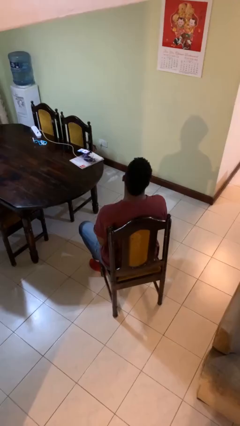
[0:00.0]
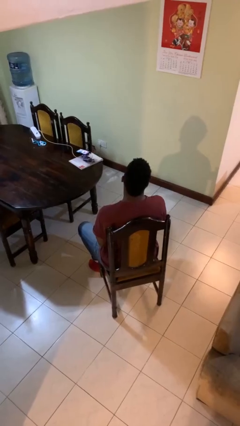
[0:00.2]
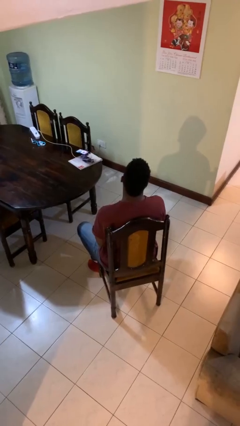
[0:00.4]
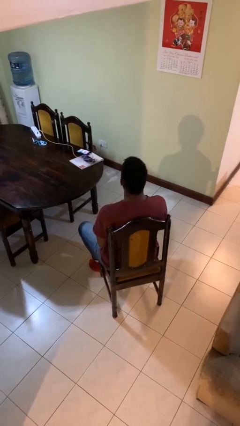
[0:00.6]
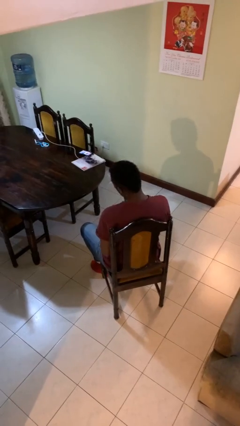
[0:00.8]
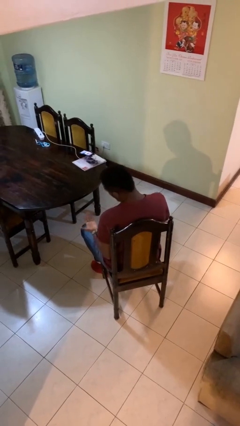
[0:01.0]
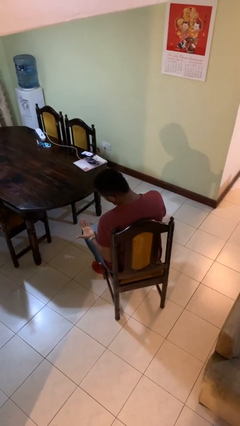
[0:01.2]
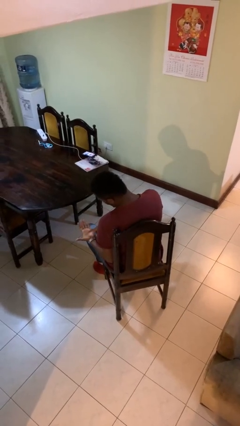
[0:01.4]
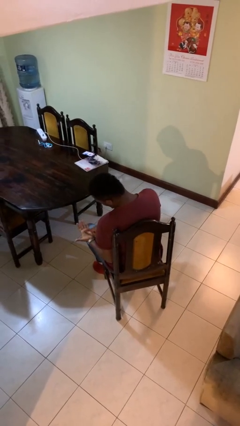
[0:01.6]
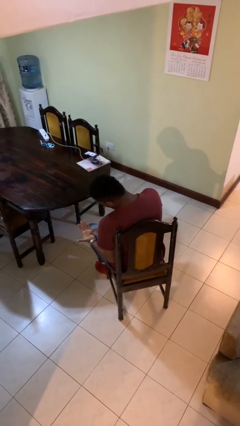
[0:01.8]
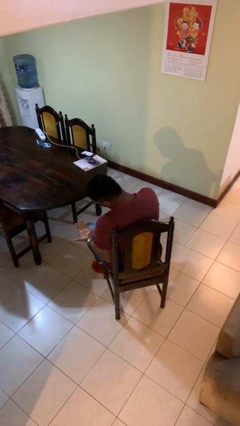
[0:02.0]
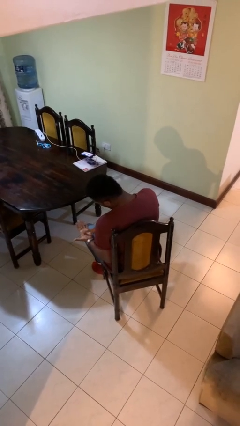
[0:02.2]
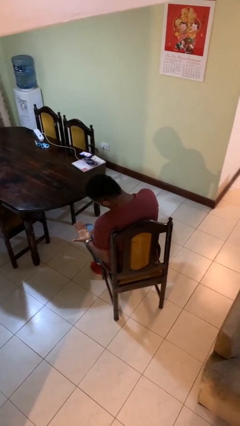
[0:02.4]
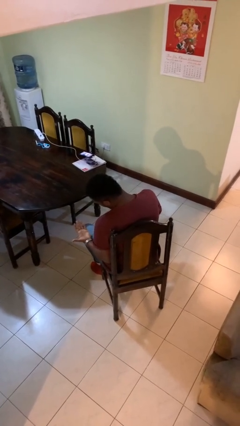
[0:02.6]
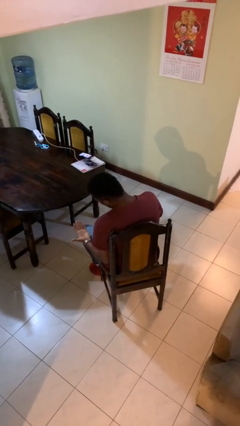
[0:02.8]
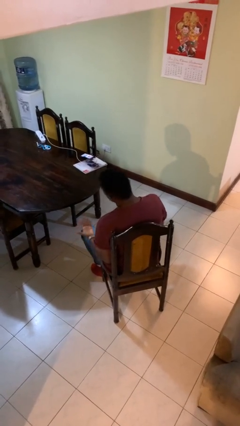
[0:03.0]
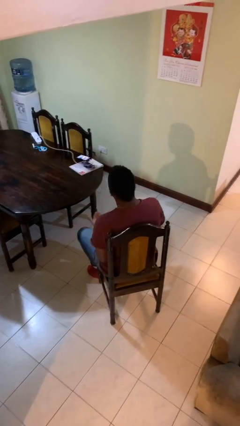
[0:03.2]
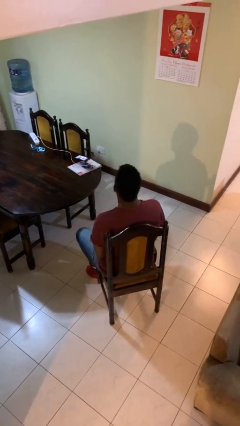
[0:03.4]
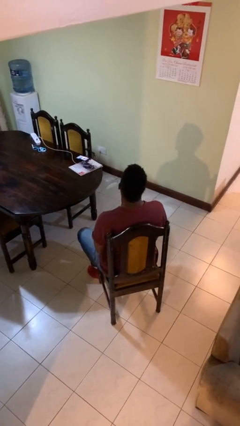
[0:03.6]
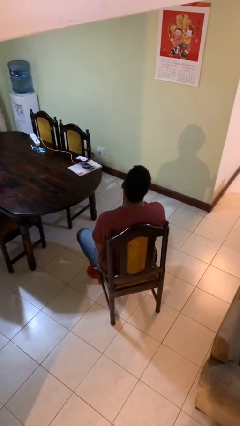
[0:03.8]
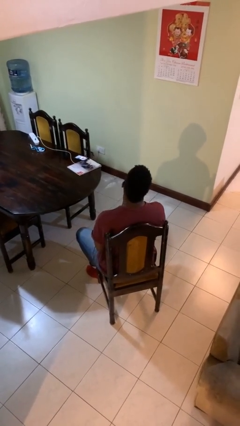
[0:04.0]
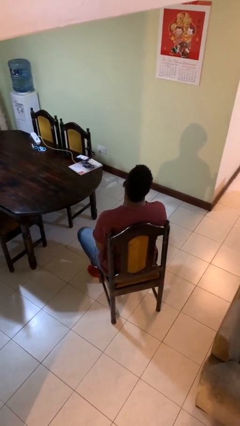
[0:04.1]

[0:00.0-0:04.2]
person looks at hands in lap

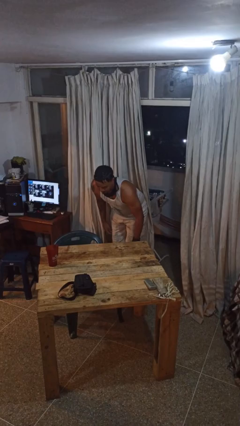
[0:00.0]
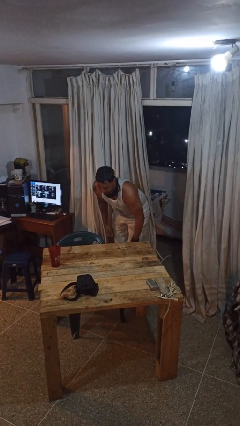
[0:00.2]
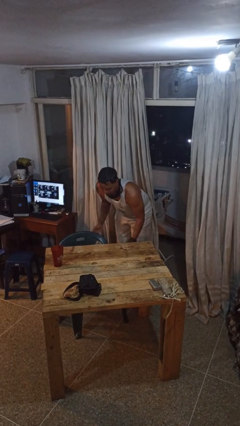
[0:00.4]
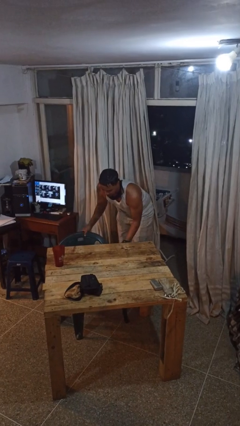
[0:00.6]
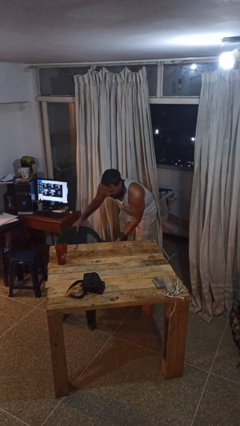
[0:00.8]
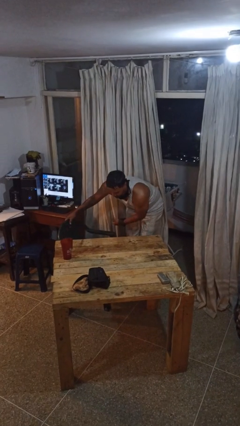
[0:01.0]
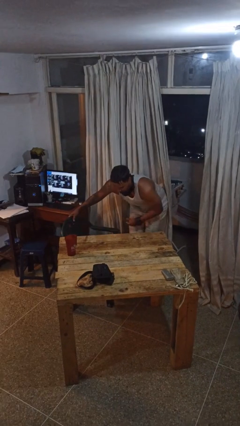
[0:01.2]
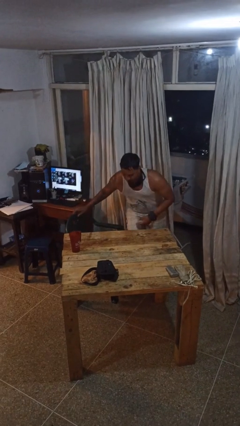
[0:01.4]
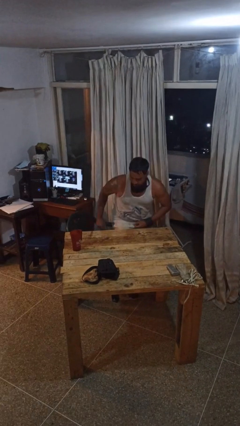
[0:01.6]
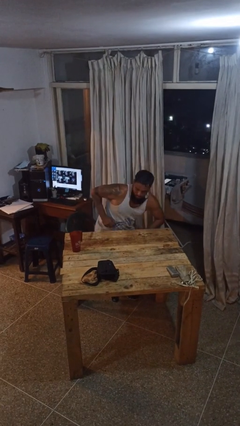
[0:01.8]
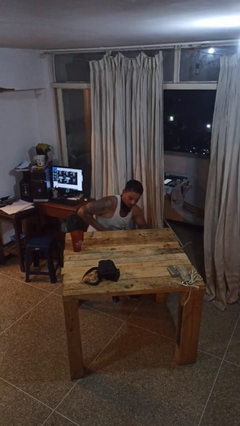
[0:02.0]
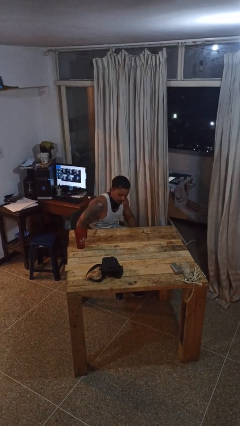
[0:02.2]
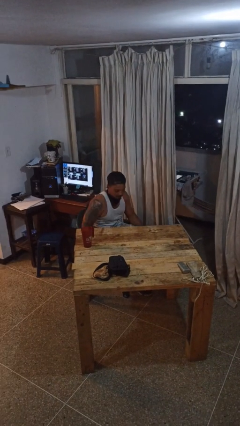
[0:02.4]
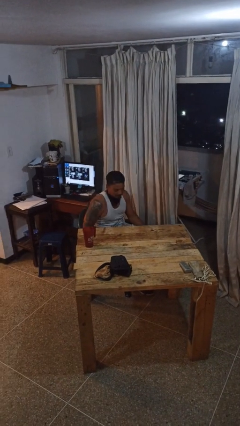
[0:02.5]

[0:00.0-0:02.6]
person sits down

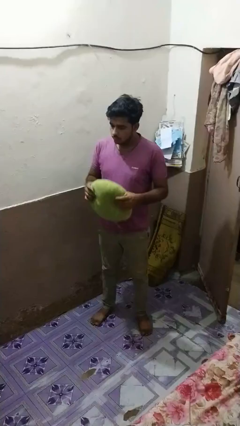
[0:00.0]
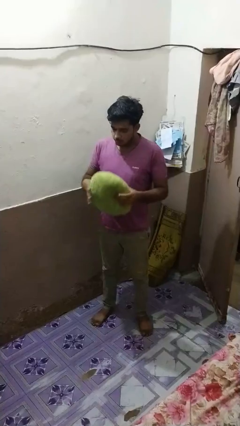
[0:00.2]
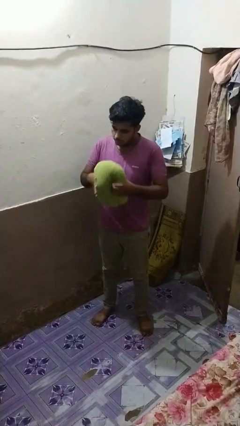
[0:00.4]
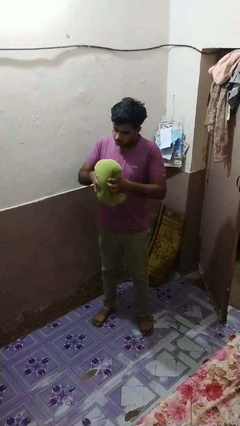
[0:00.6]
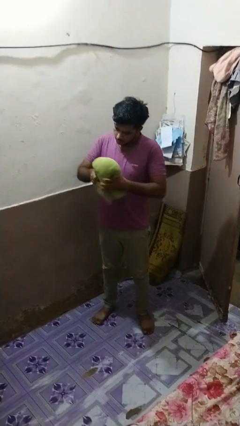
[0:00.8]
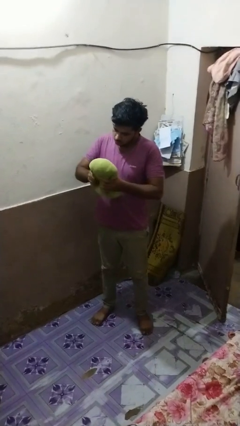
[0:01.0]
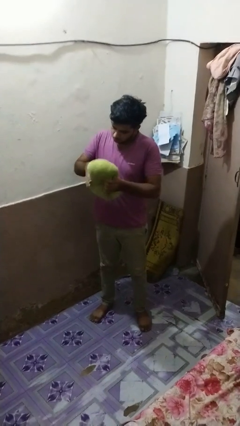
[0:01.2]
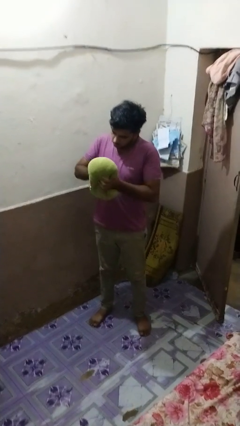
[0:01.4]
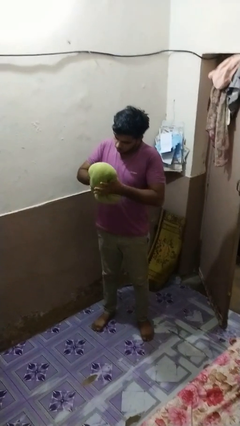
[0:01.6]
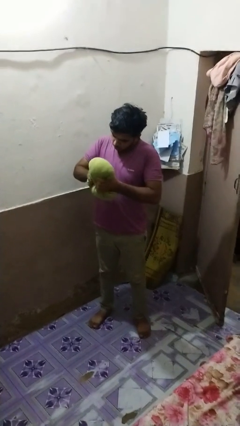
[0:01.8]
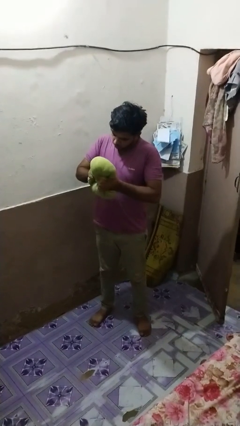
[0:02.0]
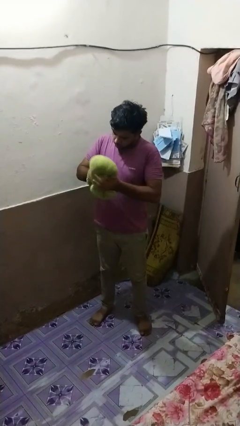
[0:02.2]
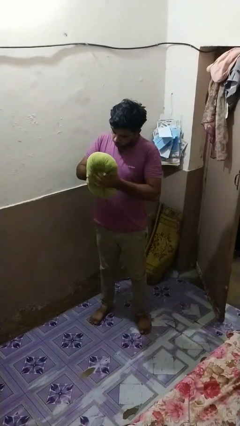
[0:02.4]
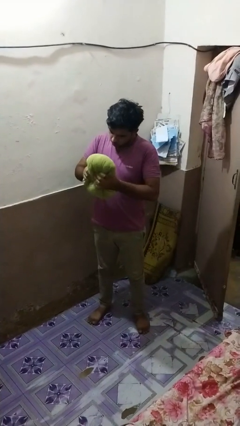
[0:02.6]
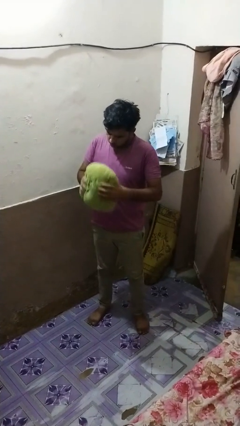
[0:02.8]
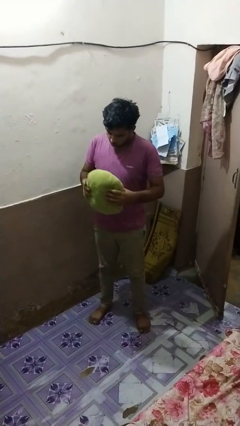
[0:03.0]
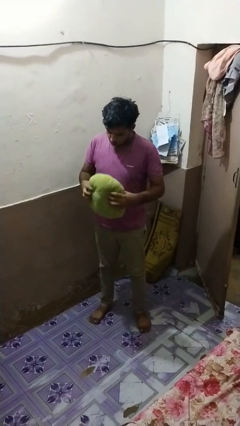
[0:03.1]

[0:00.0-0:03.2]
person squeezes object

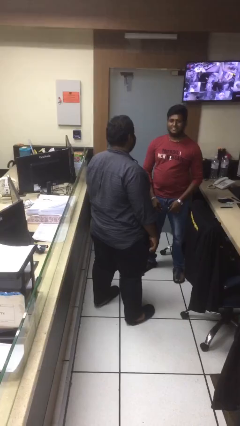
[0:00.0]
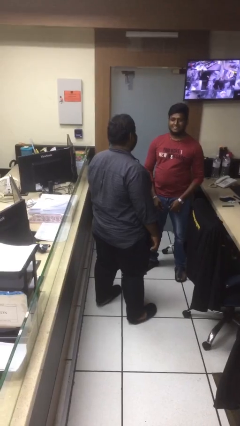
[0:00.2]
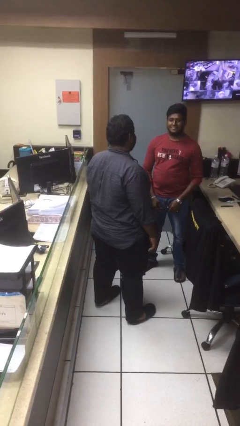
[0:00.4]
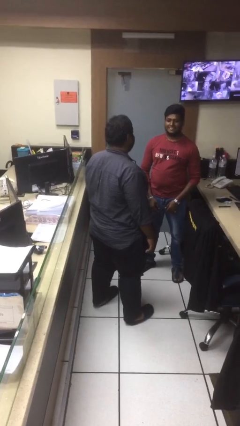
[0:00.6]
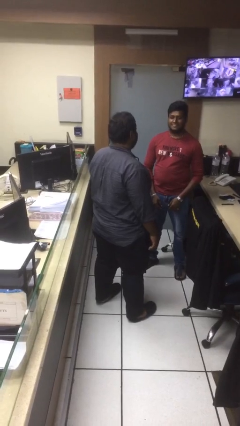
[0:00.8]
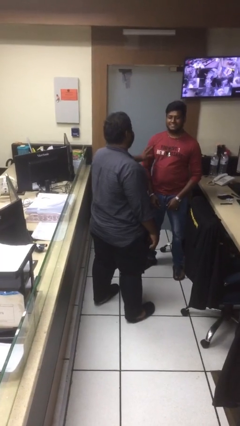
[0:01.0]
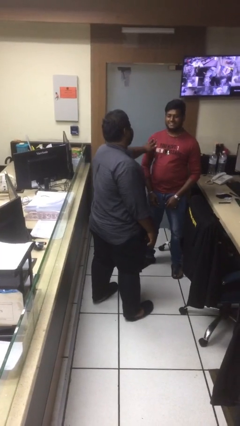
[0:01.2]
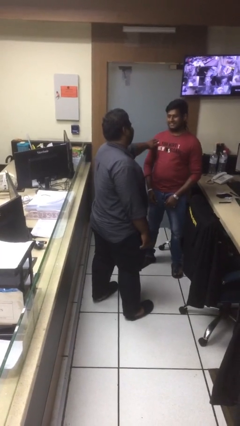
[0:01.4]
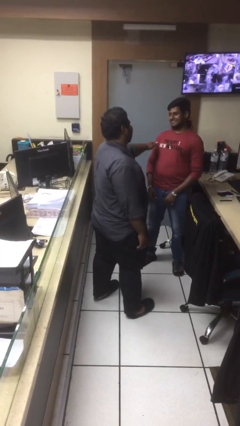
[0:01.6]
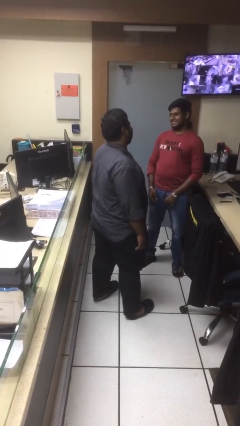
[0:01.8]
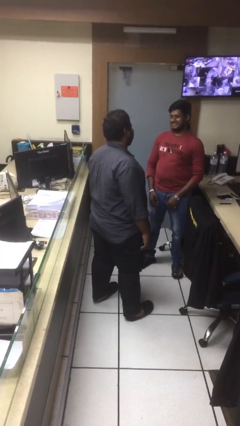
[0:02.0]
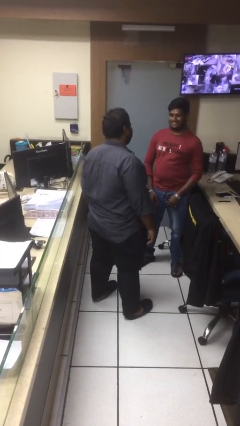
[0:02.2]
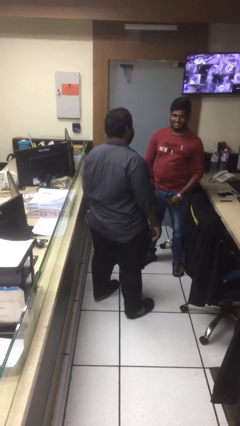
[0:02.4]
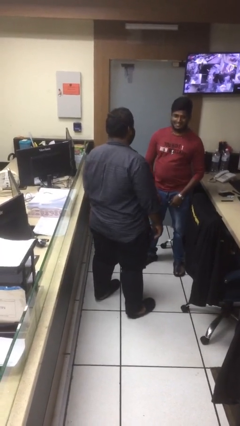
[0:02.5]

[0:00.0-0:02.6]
person shoves person

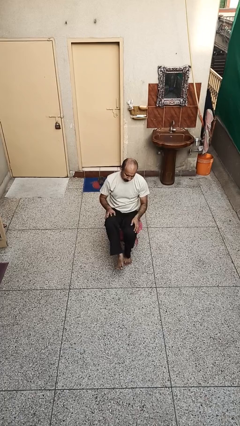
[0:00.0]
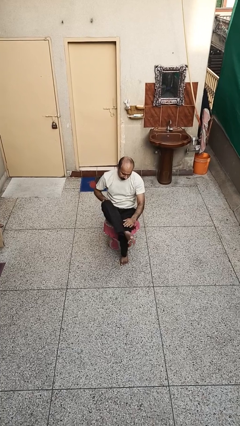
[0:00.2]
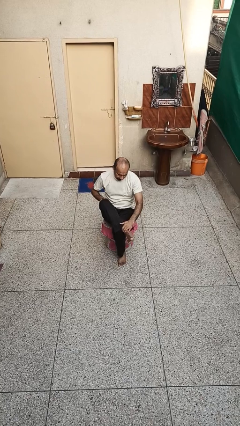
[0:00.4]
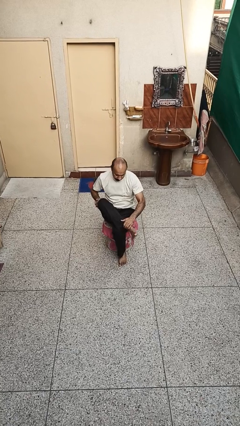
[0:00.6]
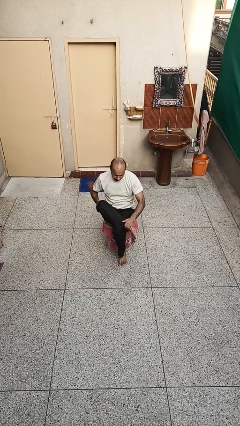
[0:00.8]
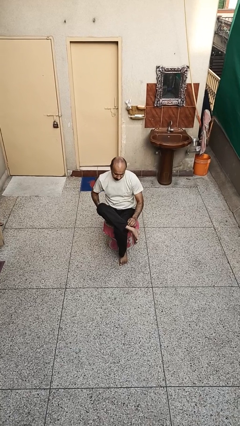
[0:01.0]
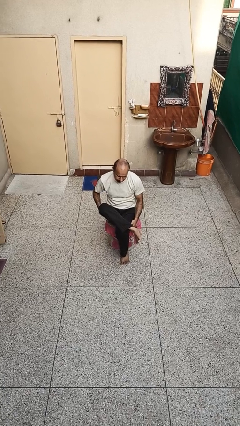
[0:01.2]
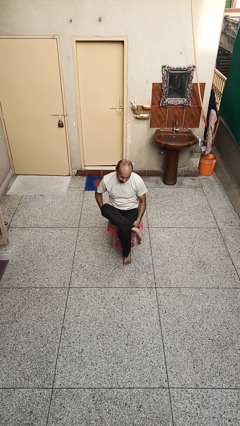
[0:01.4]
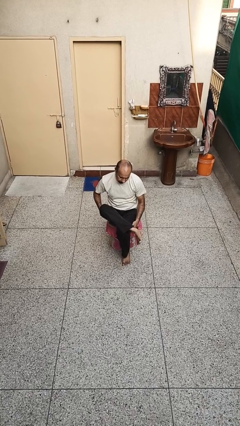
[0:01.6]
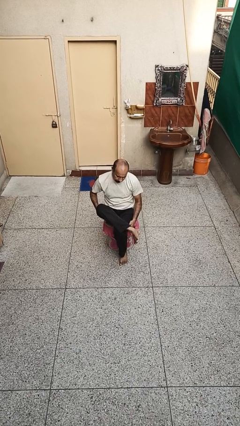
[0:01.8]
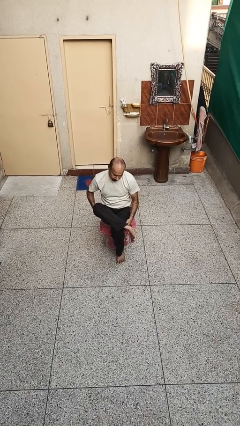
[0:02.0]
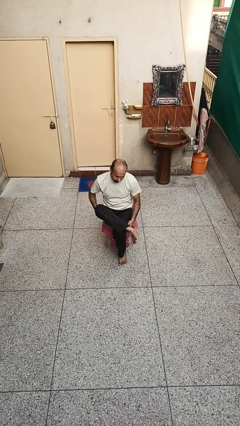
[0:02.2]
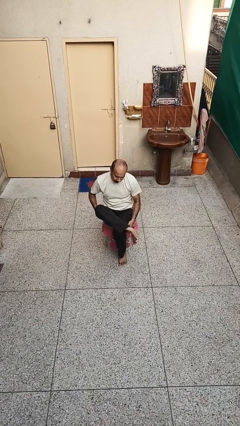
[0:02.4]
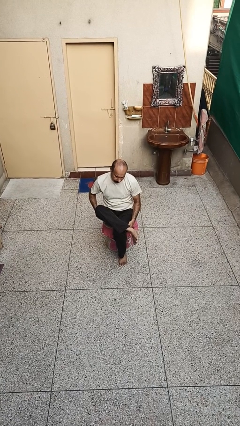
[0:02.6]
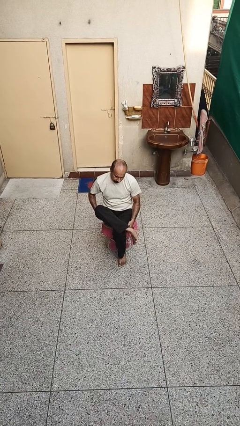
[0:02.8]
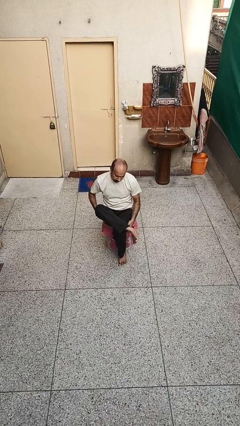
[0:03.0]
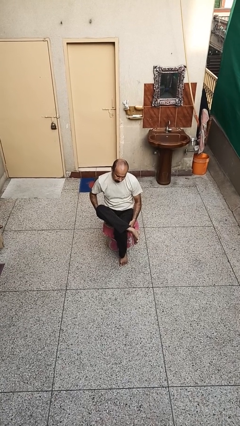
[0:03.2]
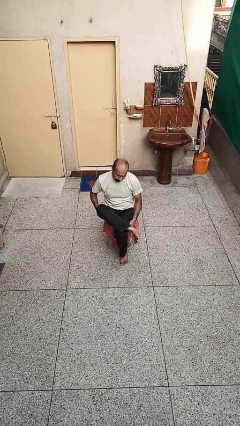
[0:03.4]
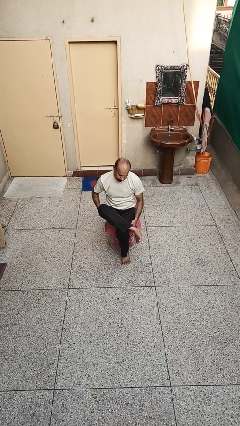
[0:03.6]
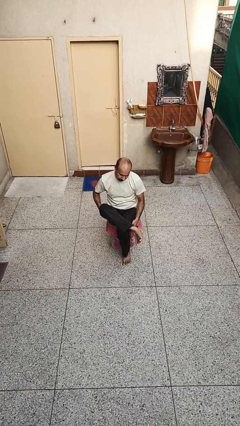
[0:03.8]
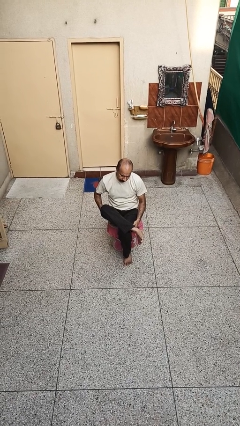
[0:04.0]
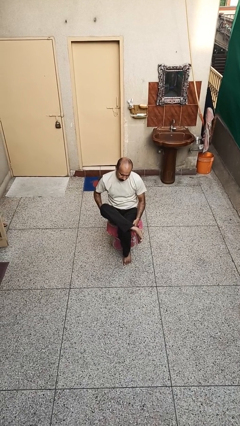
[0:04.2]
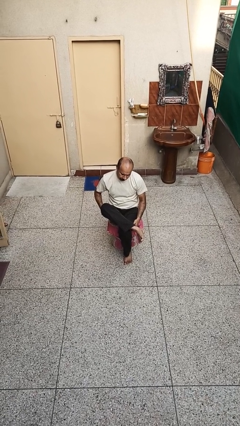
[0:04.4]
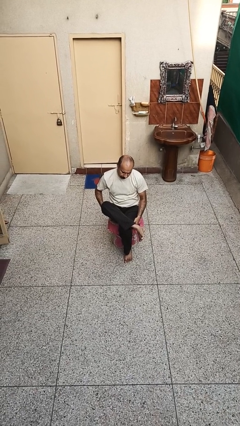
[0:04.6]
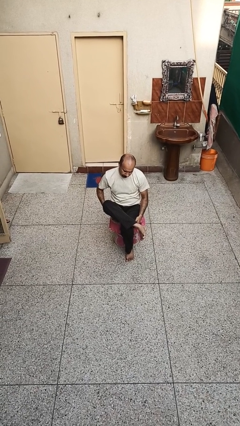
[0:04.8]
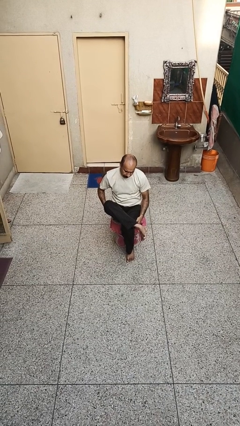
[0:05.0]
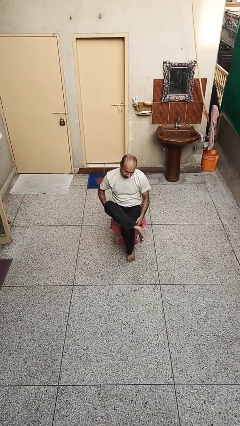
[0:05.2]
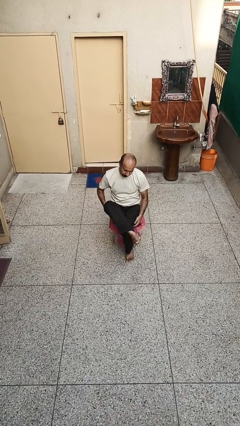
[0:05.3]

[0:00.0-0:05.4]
person crosses legs
